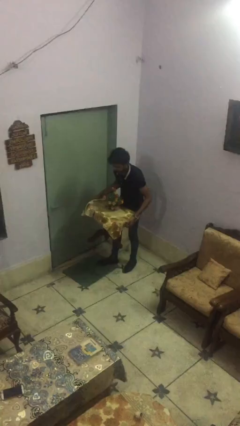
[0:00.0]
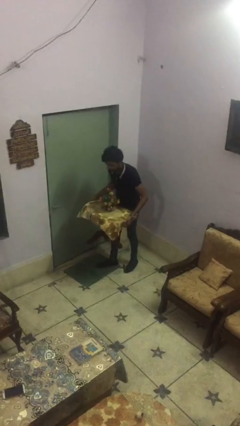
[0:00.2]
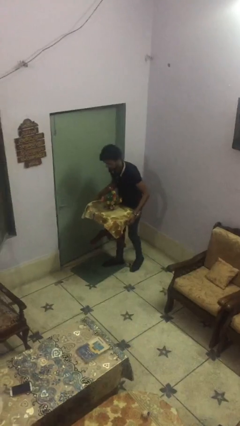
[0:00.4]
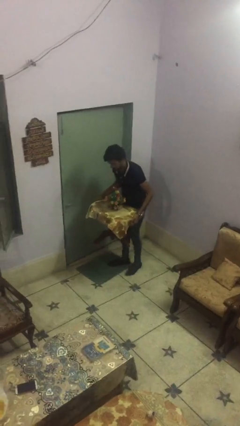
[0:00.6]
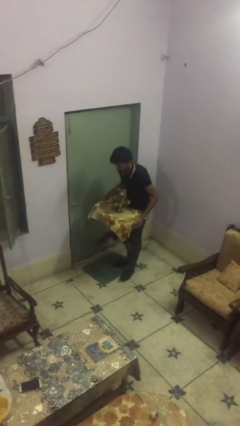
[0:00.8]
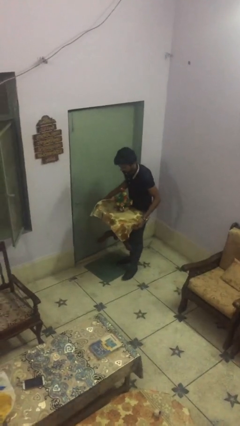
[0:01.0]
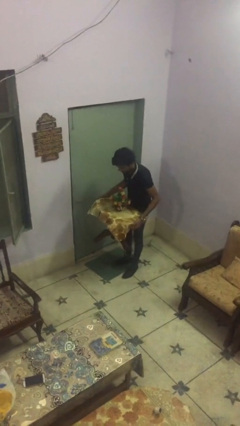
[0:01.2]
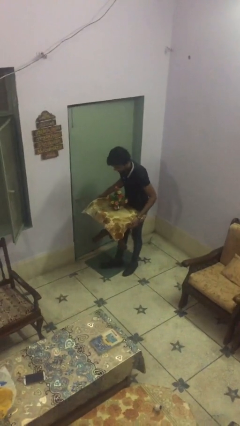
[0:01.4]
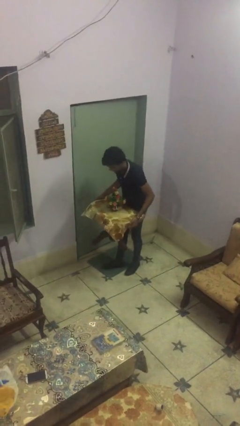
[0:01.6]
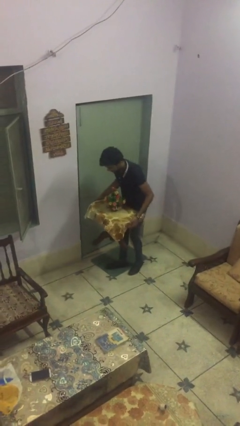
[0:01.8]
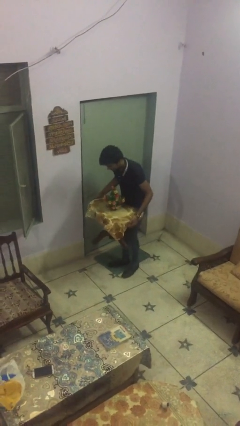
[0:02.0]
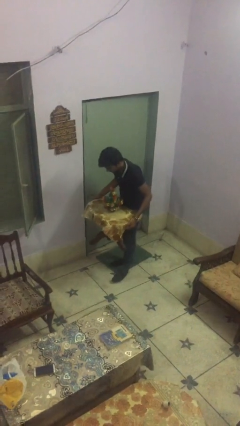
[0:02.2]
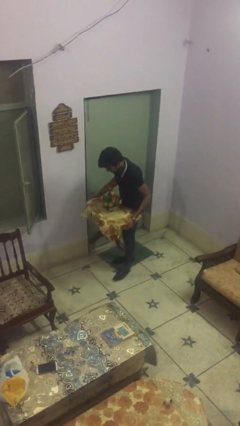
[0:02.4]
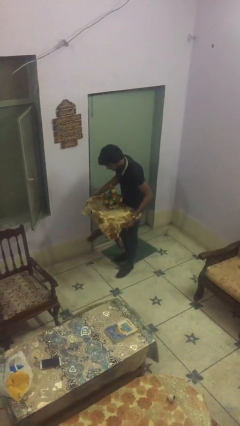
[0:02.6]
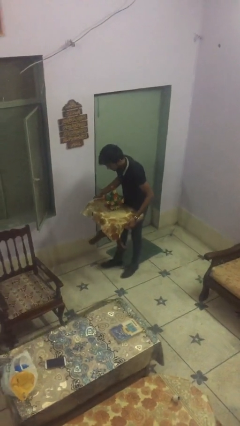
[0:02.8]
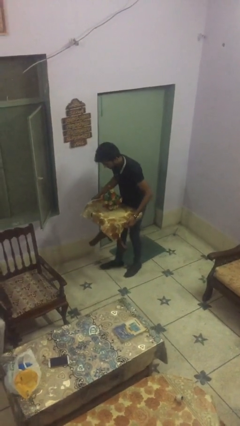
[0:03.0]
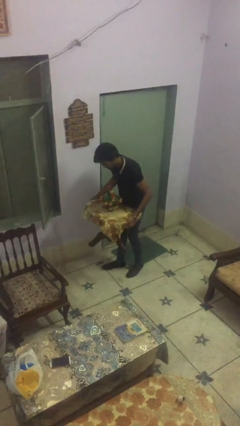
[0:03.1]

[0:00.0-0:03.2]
person carries heavy object

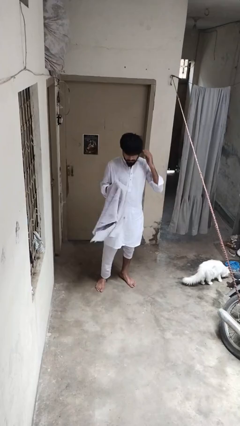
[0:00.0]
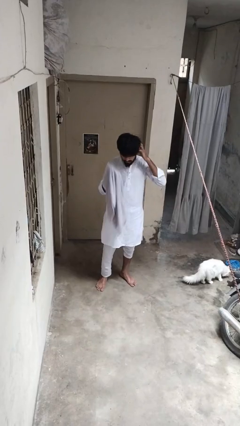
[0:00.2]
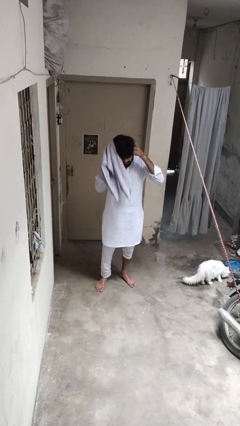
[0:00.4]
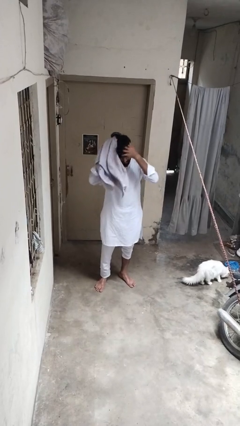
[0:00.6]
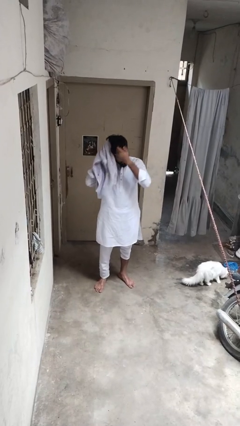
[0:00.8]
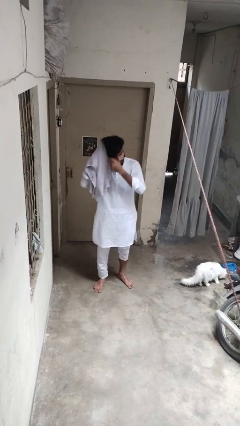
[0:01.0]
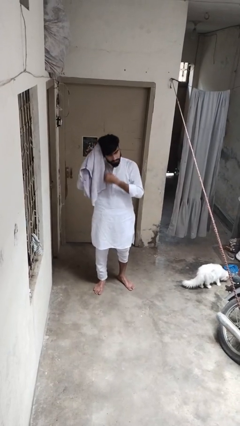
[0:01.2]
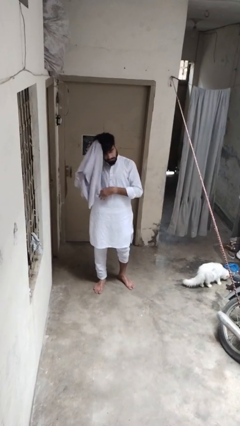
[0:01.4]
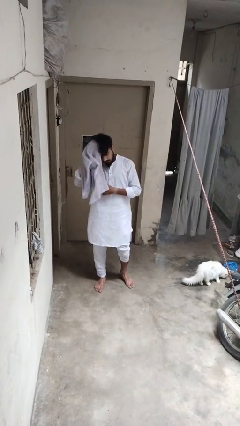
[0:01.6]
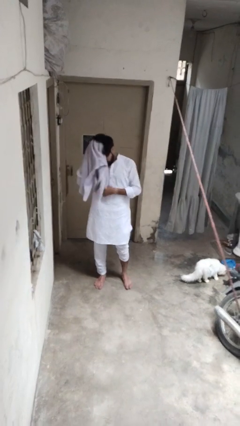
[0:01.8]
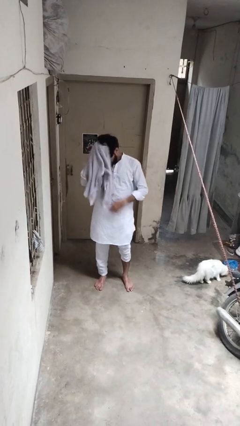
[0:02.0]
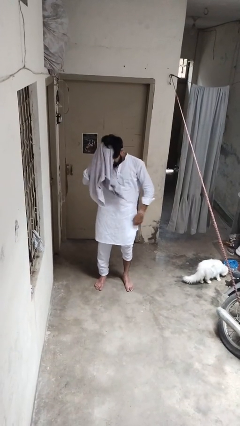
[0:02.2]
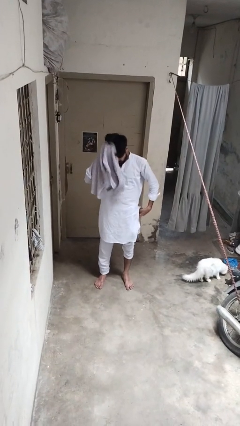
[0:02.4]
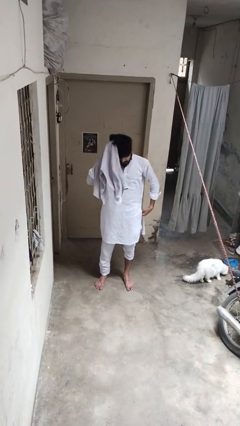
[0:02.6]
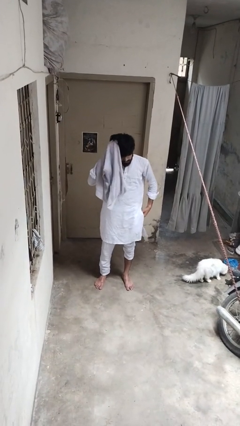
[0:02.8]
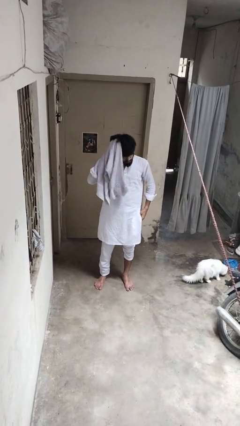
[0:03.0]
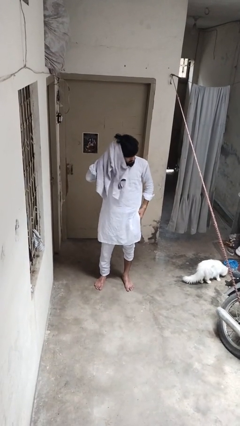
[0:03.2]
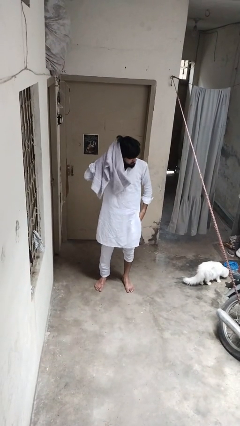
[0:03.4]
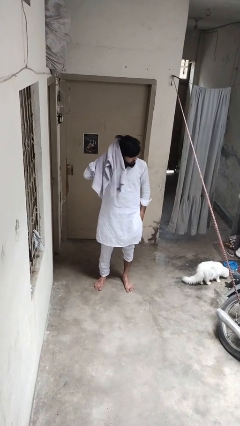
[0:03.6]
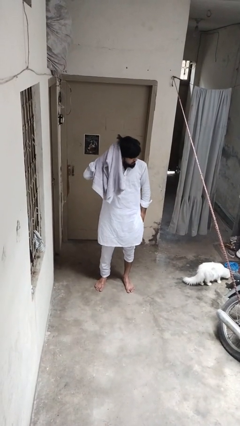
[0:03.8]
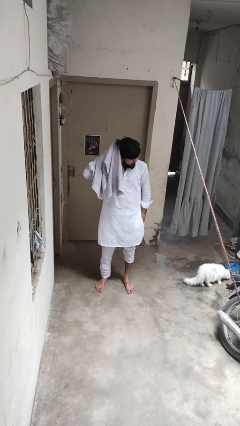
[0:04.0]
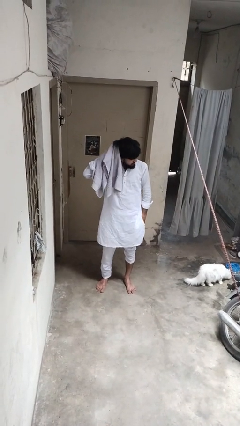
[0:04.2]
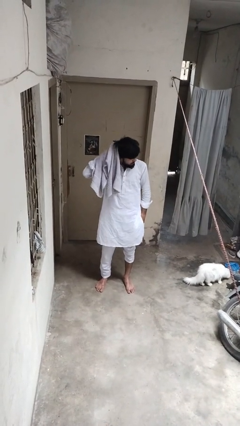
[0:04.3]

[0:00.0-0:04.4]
person dries hair with towel

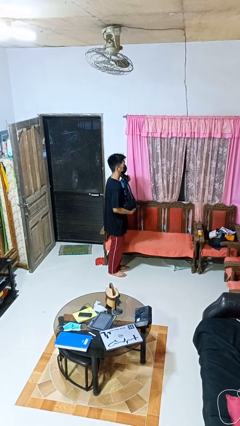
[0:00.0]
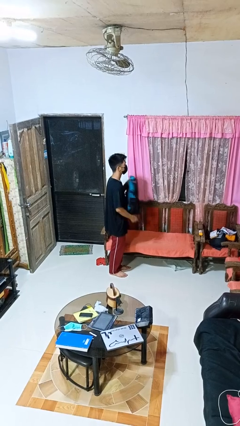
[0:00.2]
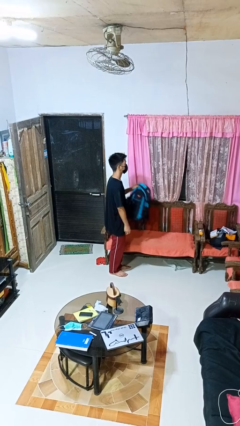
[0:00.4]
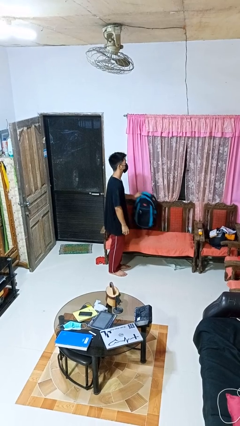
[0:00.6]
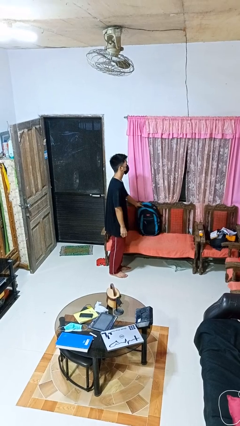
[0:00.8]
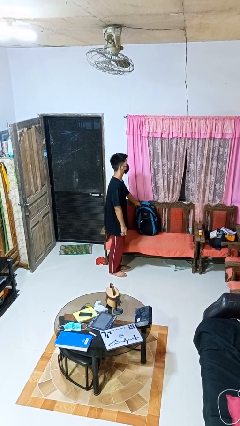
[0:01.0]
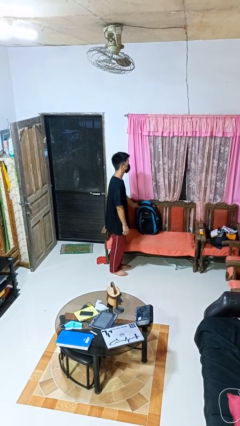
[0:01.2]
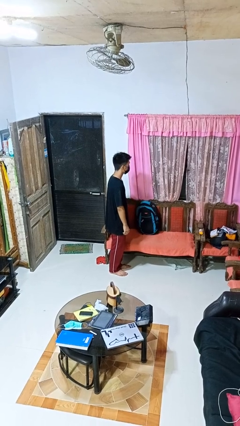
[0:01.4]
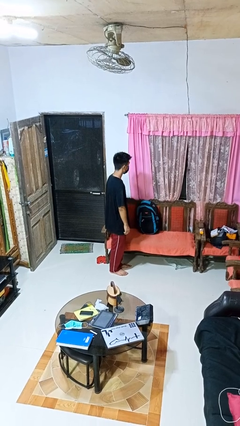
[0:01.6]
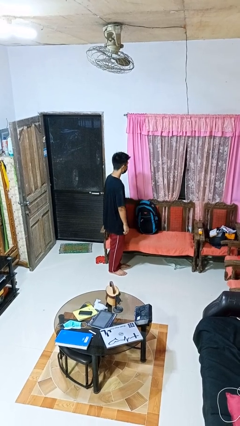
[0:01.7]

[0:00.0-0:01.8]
person puts down object on couch

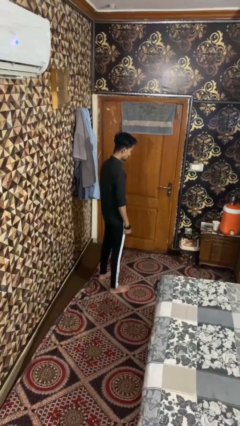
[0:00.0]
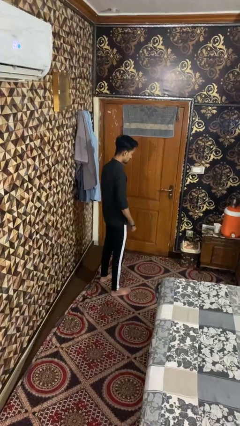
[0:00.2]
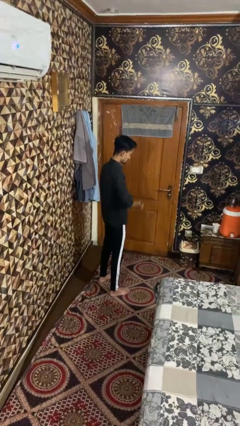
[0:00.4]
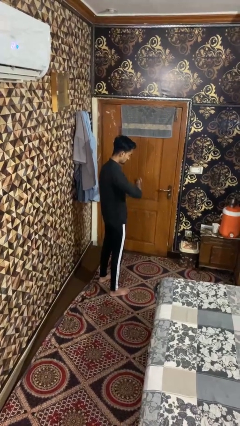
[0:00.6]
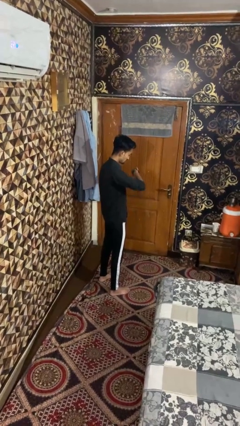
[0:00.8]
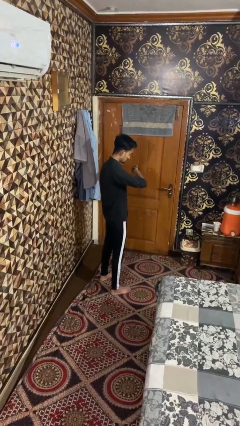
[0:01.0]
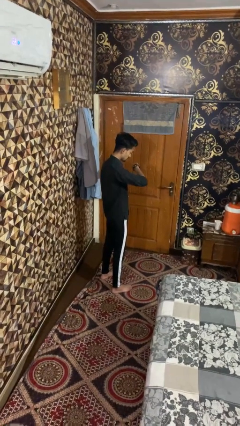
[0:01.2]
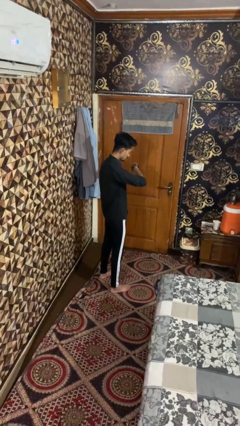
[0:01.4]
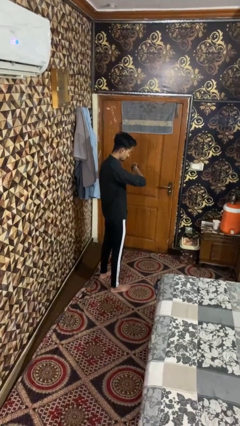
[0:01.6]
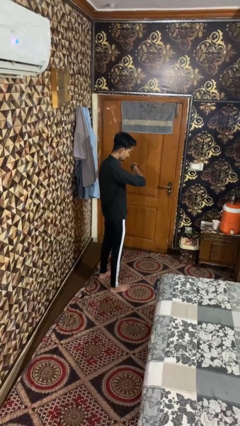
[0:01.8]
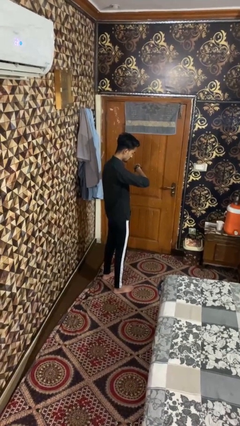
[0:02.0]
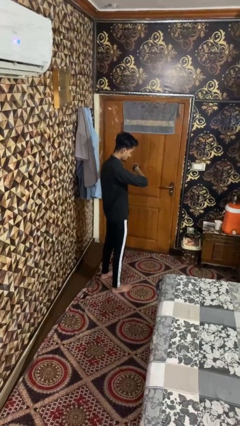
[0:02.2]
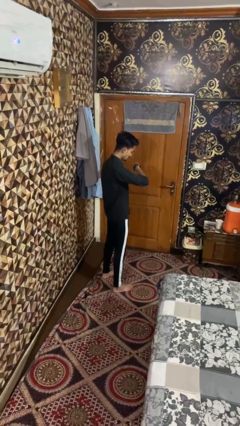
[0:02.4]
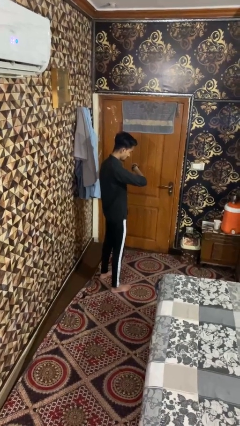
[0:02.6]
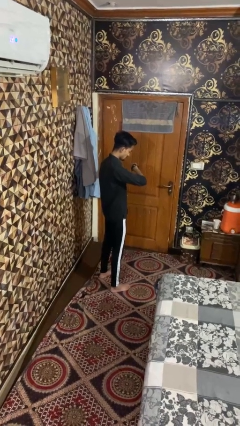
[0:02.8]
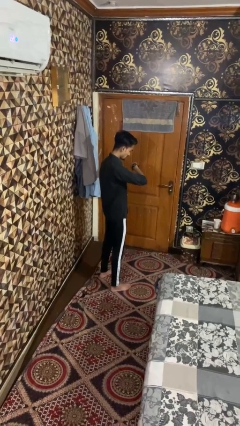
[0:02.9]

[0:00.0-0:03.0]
person looks at wristwatch

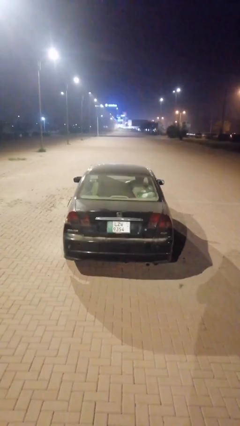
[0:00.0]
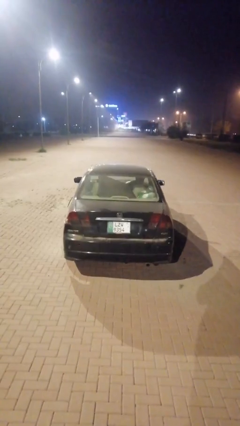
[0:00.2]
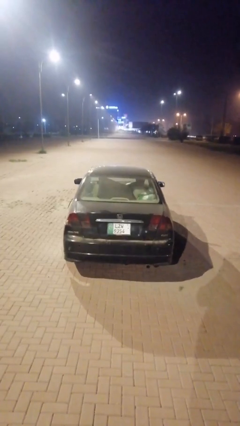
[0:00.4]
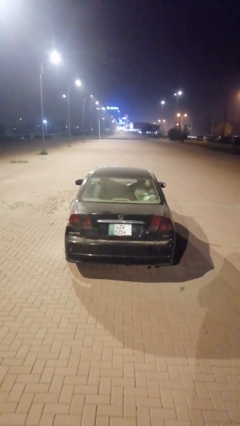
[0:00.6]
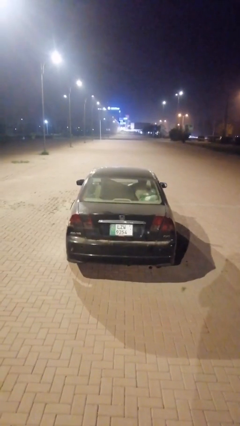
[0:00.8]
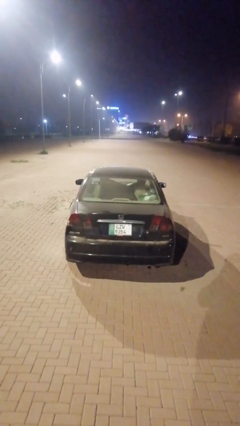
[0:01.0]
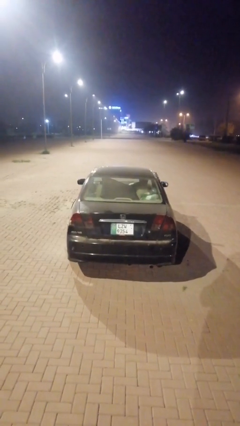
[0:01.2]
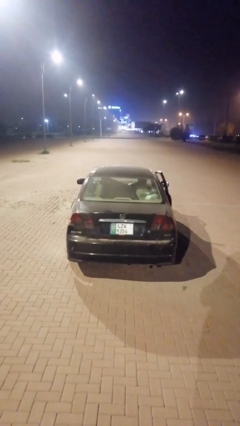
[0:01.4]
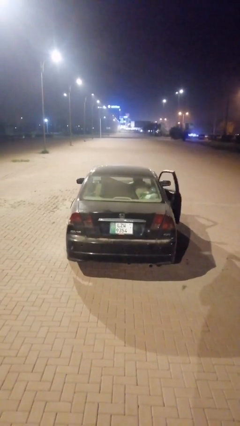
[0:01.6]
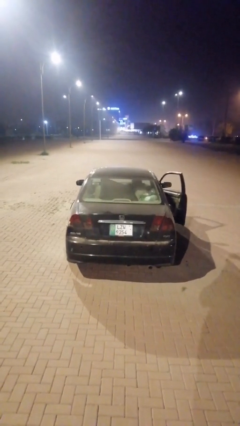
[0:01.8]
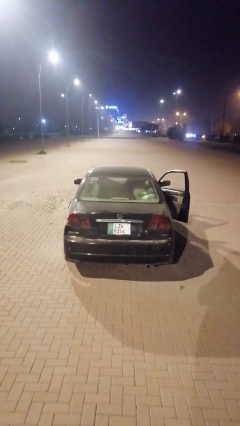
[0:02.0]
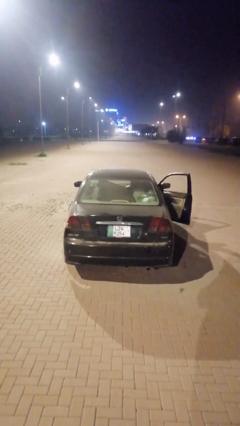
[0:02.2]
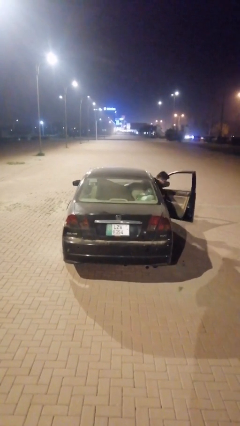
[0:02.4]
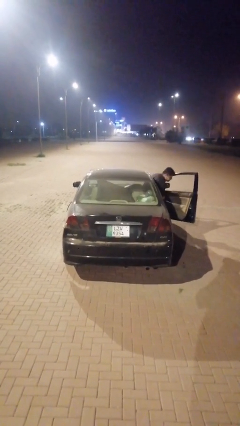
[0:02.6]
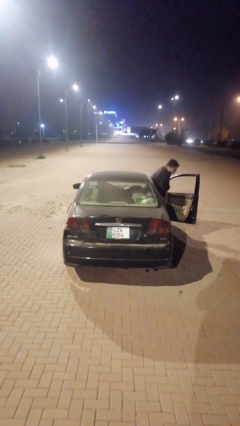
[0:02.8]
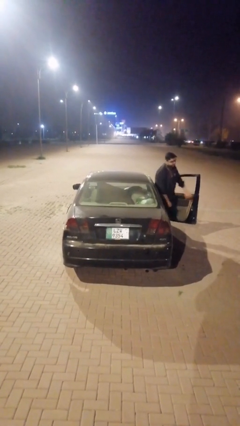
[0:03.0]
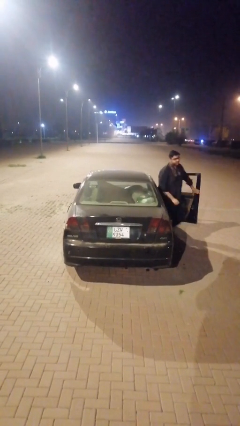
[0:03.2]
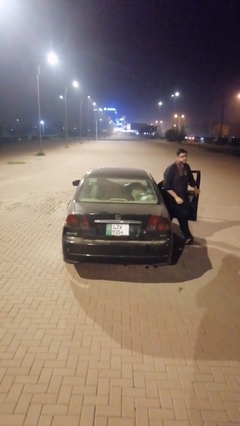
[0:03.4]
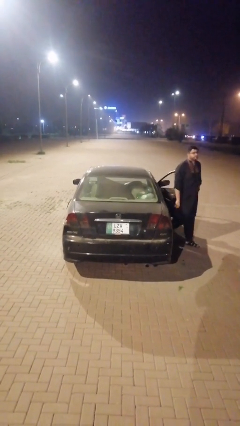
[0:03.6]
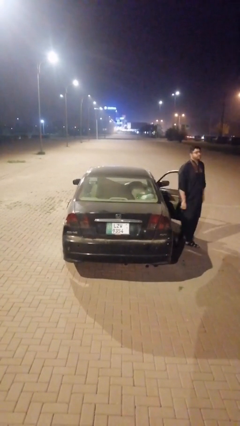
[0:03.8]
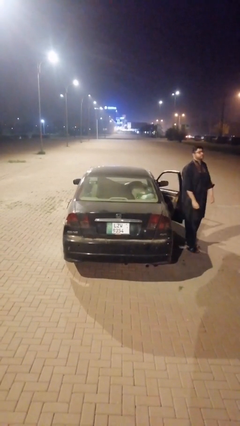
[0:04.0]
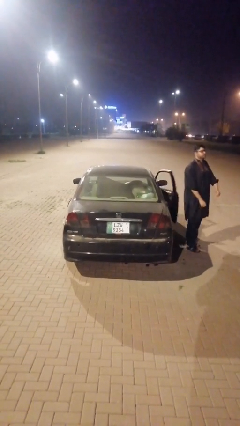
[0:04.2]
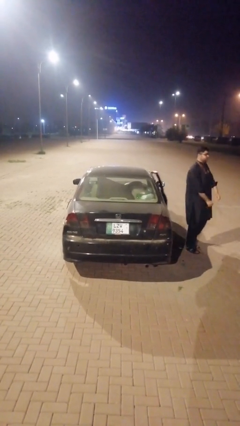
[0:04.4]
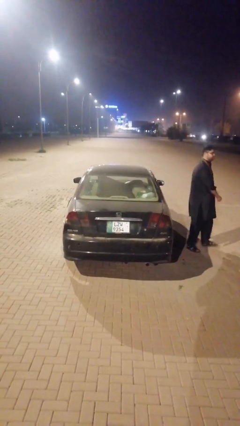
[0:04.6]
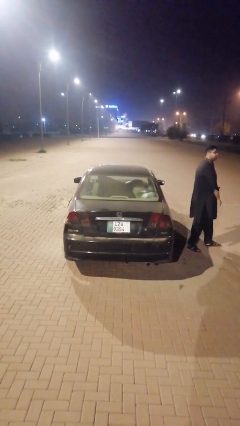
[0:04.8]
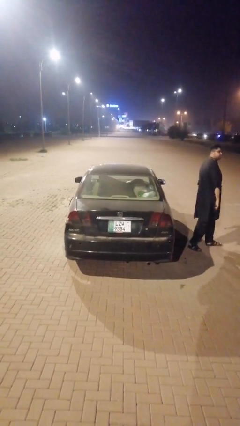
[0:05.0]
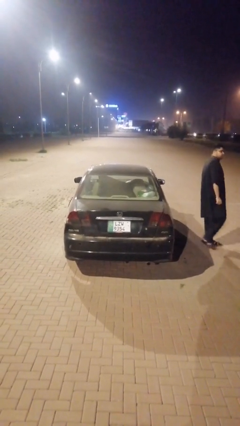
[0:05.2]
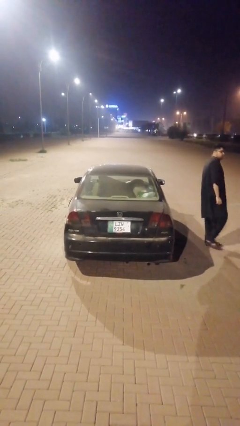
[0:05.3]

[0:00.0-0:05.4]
car drops off person
